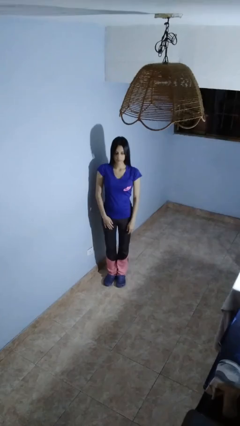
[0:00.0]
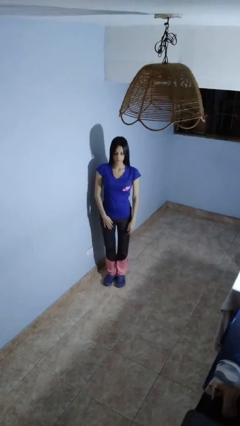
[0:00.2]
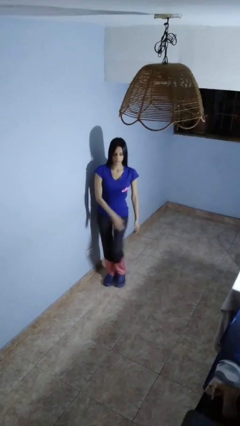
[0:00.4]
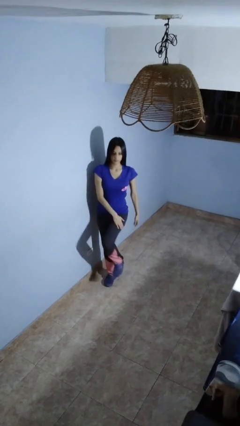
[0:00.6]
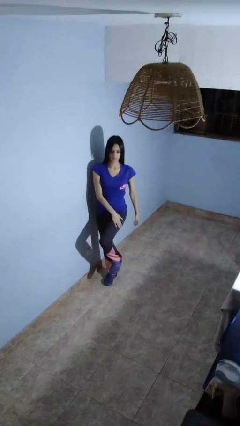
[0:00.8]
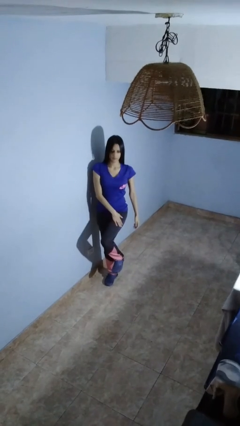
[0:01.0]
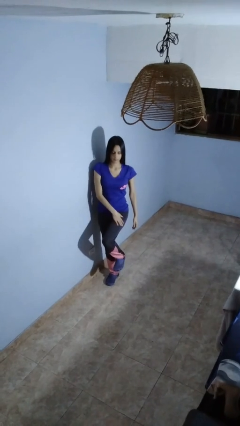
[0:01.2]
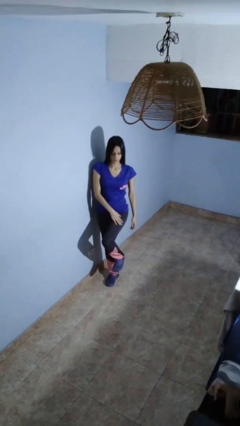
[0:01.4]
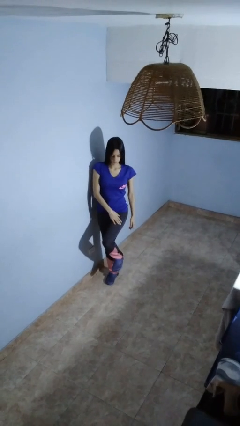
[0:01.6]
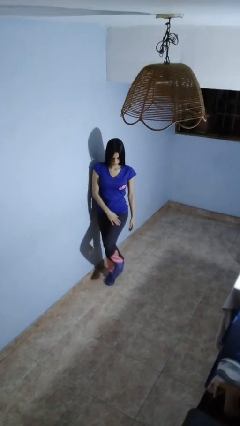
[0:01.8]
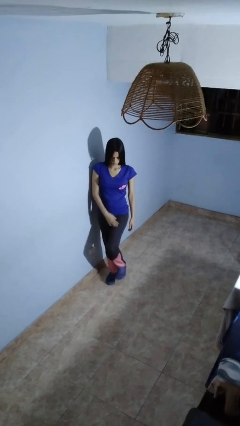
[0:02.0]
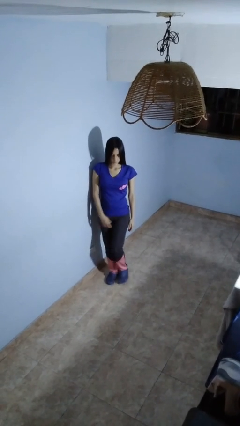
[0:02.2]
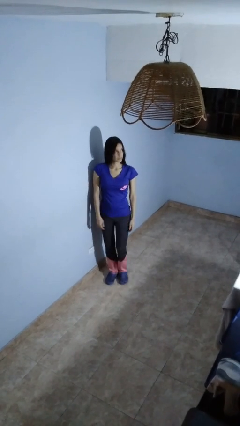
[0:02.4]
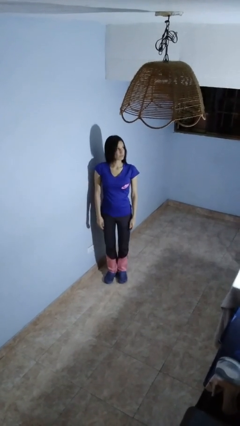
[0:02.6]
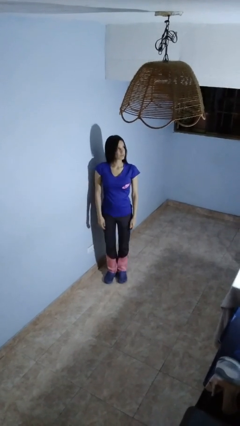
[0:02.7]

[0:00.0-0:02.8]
person swats bug

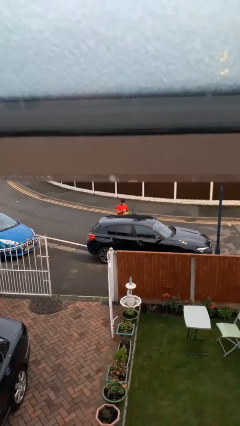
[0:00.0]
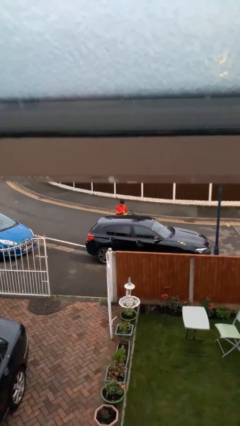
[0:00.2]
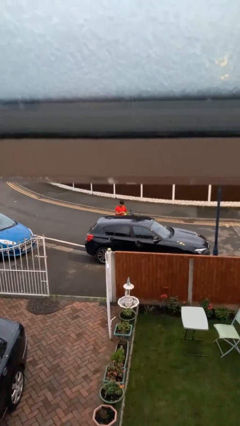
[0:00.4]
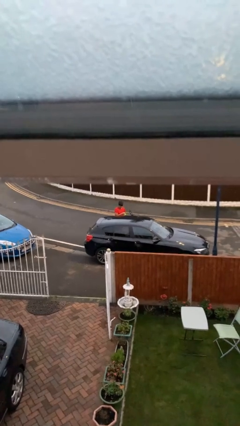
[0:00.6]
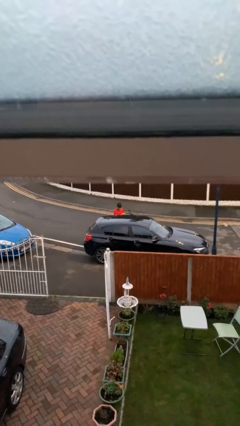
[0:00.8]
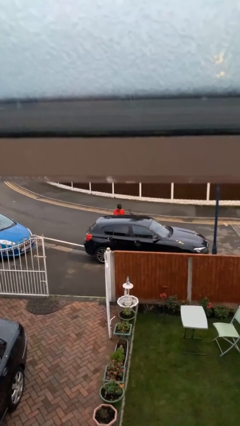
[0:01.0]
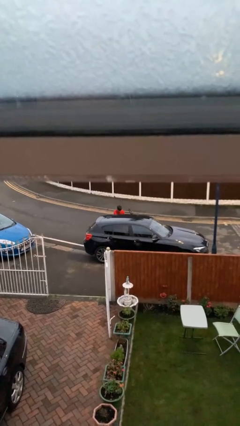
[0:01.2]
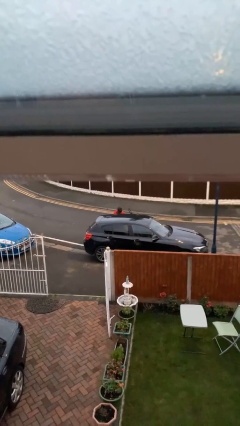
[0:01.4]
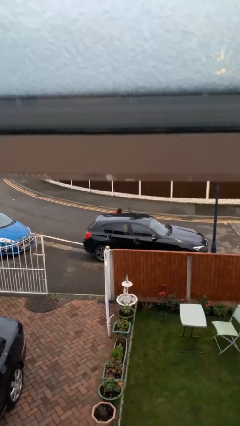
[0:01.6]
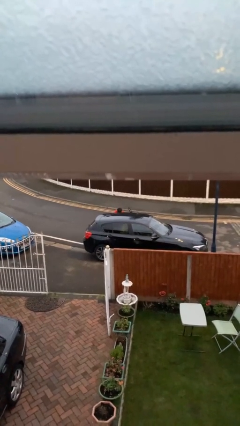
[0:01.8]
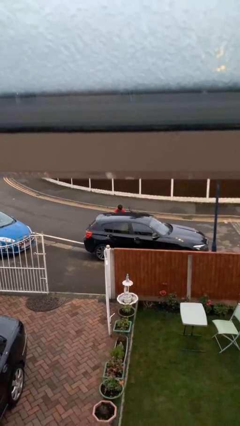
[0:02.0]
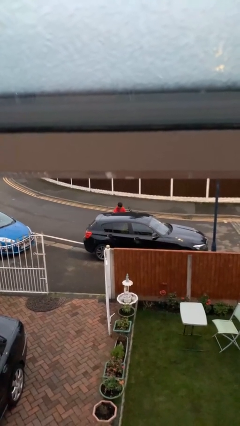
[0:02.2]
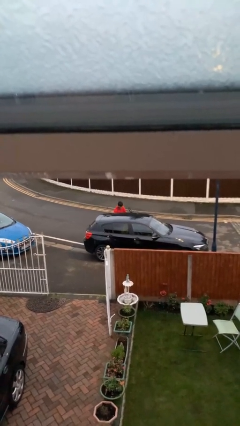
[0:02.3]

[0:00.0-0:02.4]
person loads car

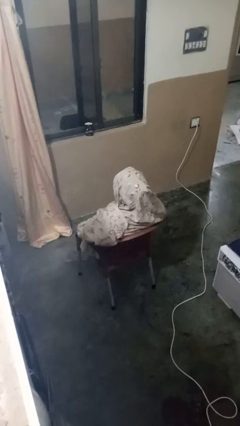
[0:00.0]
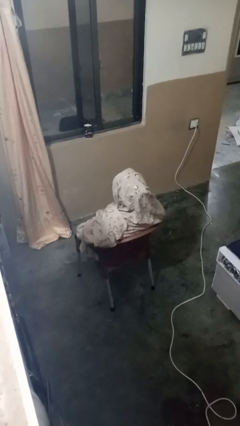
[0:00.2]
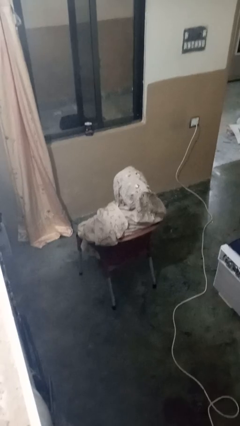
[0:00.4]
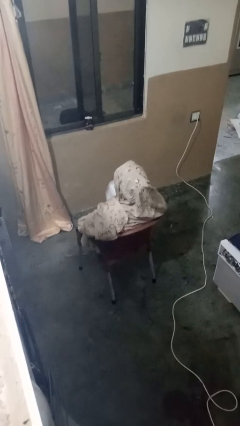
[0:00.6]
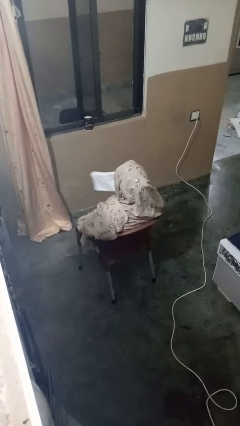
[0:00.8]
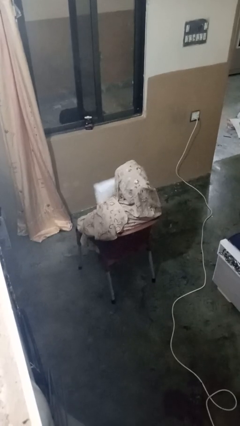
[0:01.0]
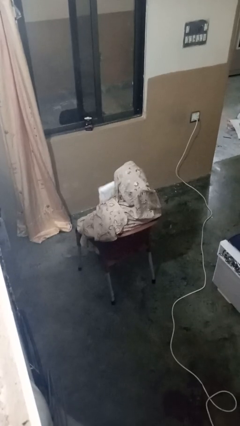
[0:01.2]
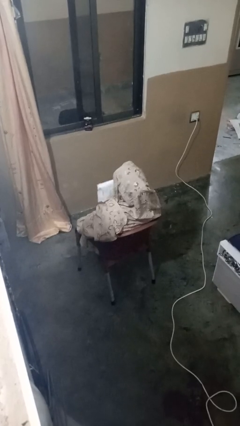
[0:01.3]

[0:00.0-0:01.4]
person wipes mouth with napkin

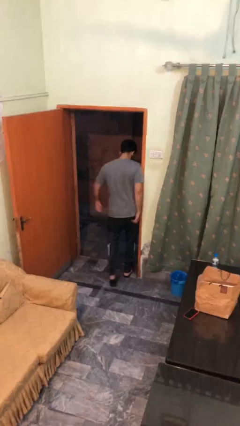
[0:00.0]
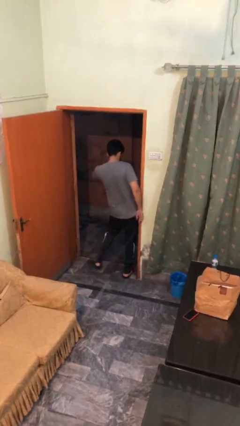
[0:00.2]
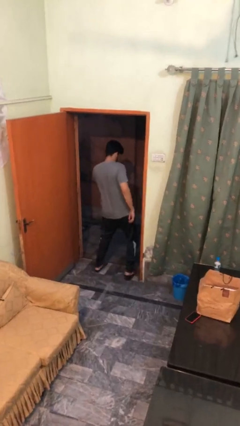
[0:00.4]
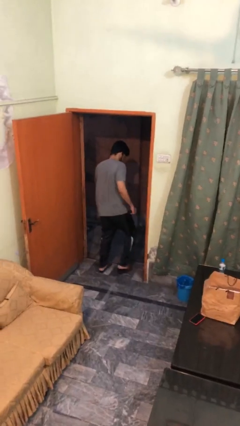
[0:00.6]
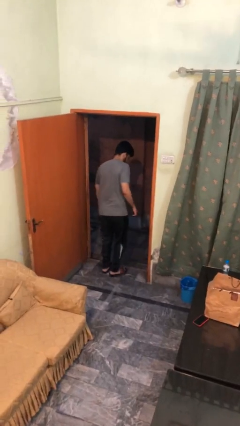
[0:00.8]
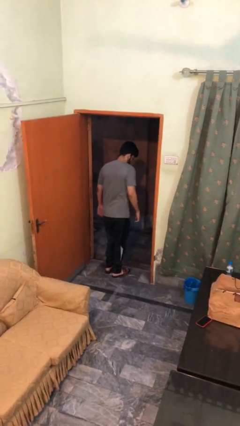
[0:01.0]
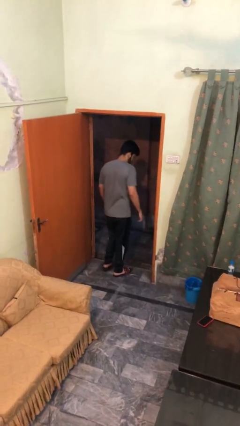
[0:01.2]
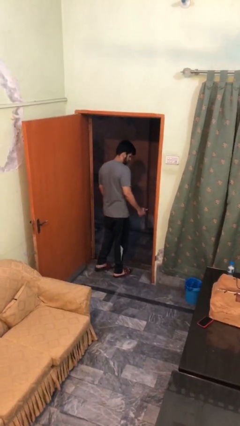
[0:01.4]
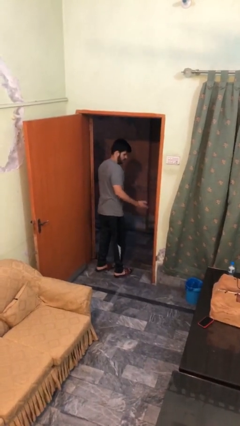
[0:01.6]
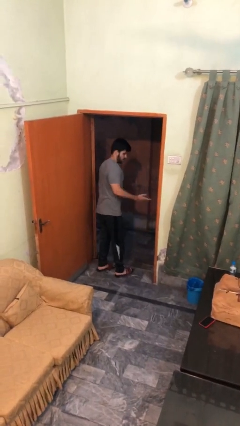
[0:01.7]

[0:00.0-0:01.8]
person bumps into wall

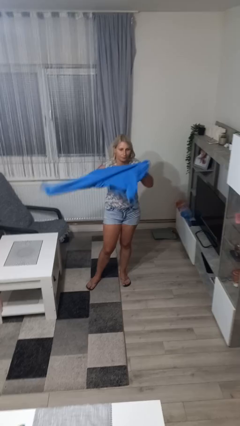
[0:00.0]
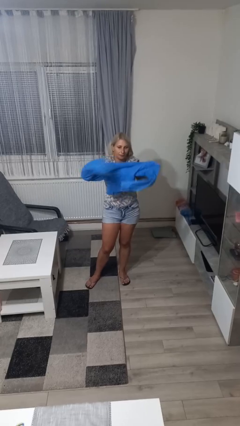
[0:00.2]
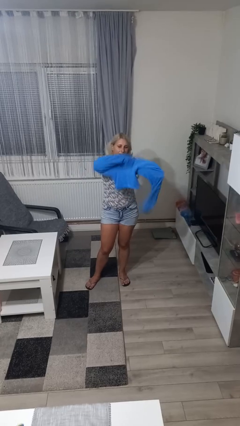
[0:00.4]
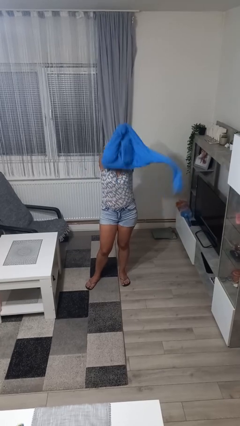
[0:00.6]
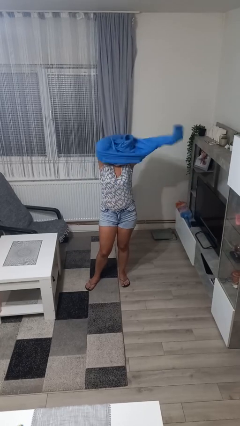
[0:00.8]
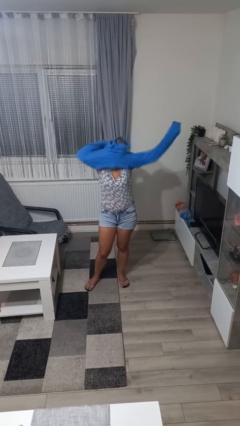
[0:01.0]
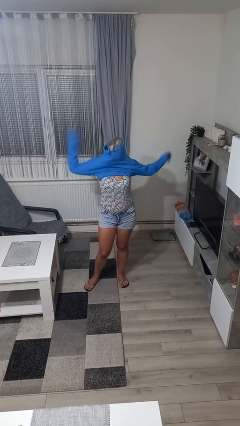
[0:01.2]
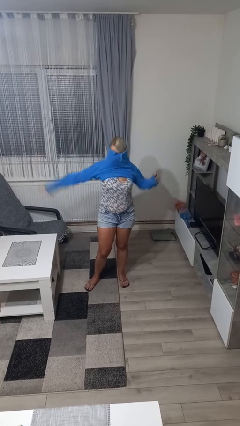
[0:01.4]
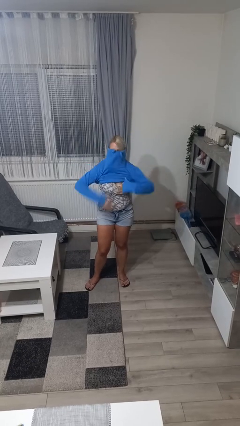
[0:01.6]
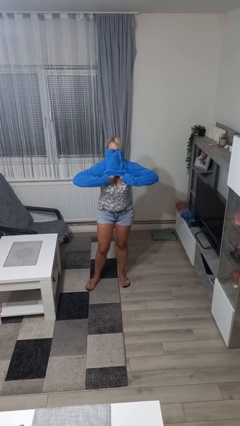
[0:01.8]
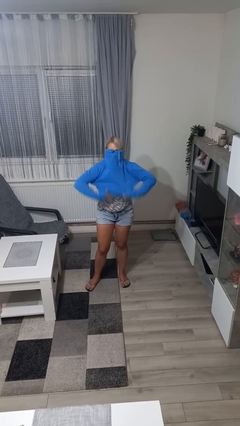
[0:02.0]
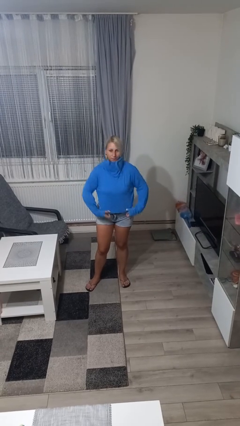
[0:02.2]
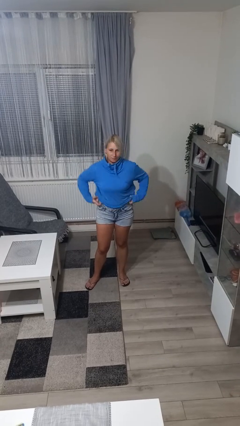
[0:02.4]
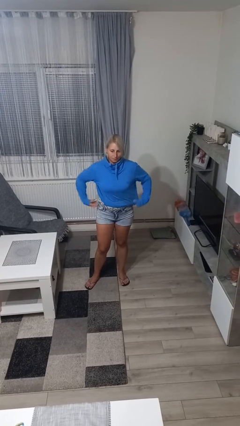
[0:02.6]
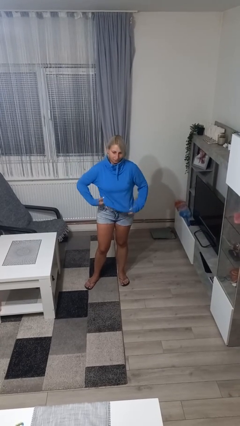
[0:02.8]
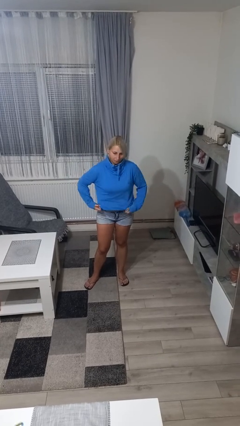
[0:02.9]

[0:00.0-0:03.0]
person puts on hoodie

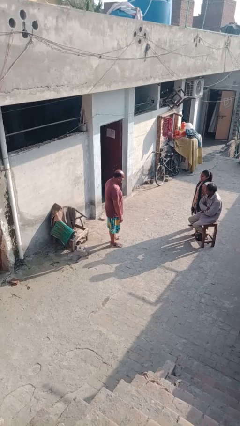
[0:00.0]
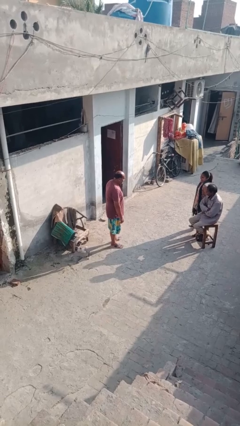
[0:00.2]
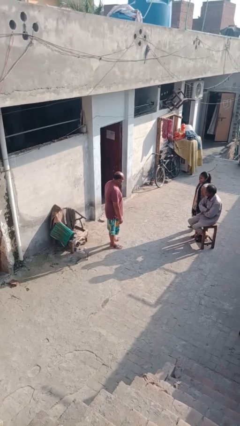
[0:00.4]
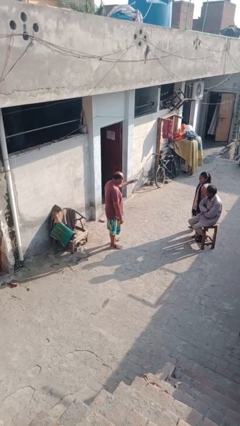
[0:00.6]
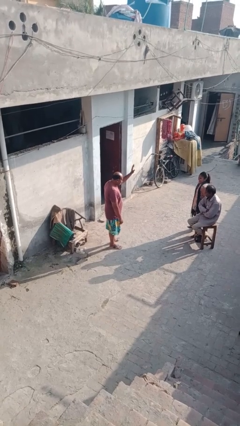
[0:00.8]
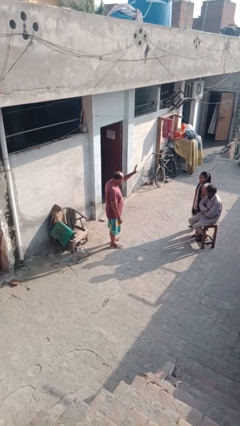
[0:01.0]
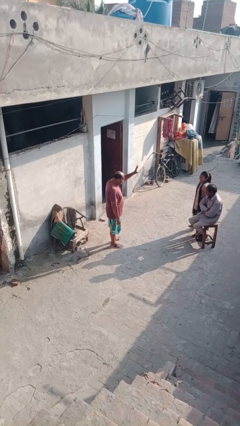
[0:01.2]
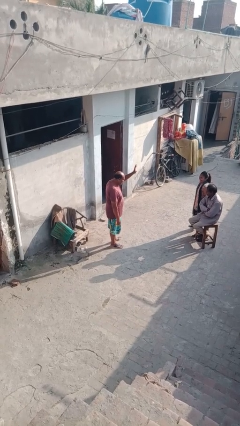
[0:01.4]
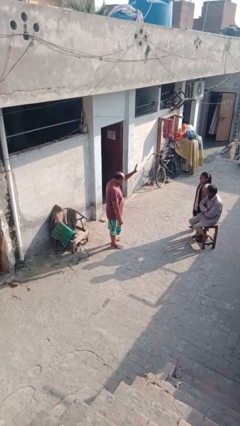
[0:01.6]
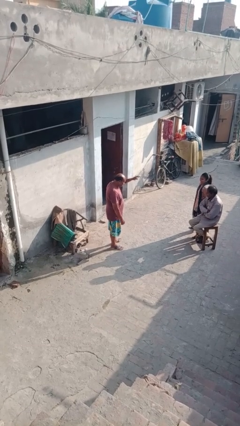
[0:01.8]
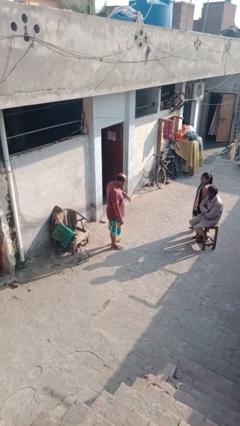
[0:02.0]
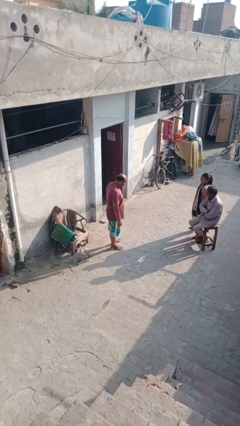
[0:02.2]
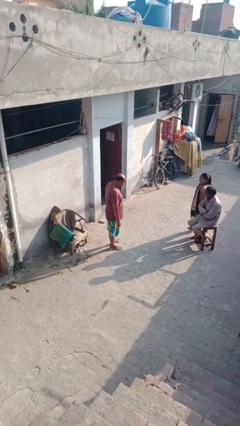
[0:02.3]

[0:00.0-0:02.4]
person waves at person

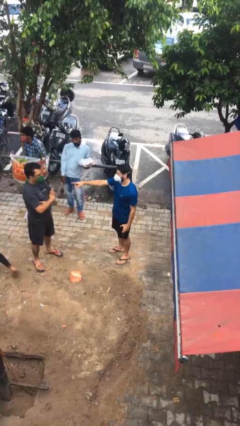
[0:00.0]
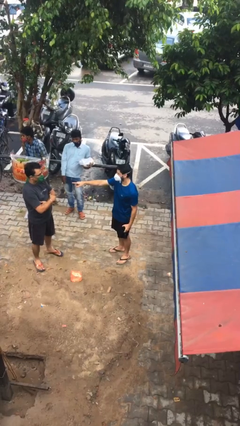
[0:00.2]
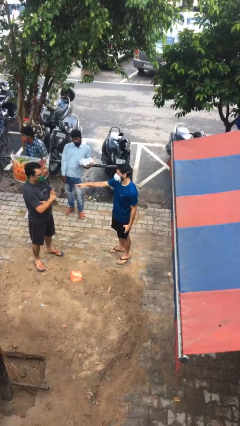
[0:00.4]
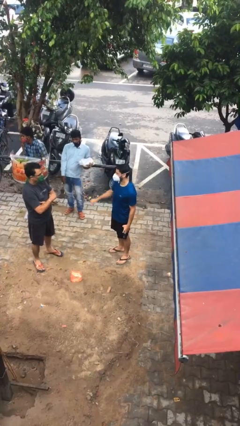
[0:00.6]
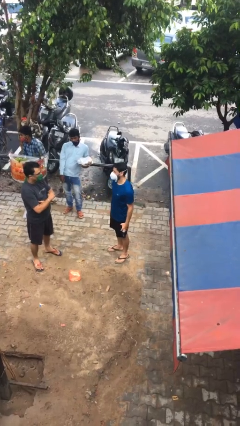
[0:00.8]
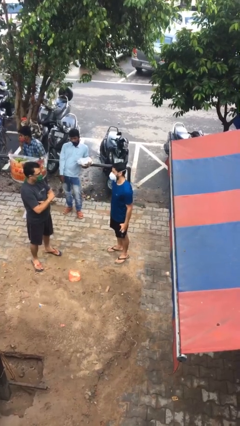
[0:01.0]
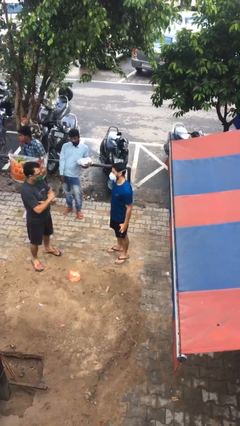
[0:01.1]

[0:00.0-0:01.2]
person points at person

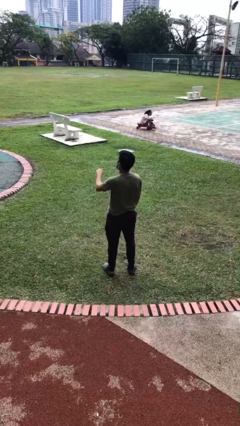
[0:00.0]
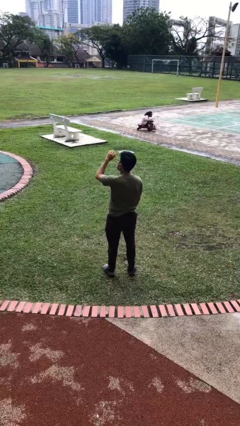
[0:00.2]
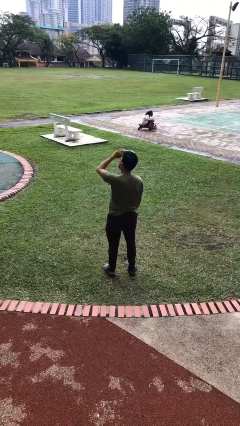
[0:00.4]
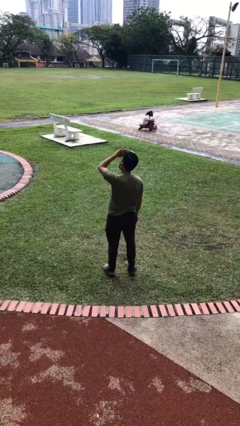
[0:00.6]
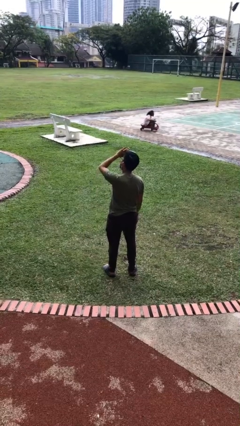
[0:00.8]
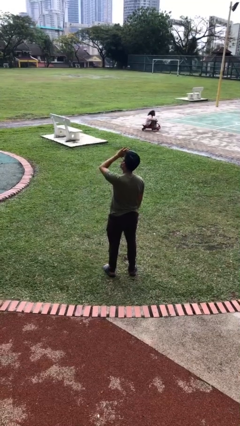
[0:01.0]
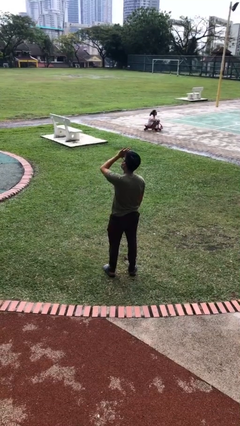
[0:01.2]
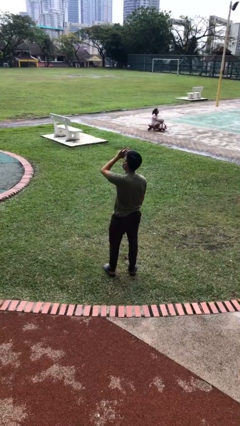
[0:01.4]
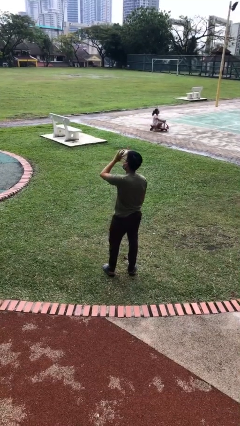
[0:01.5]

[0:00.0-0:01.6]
person shades eyes
